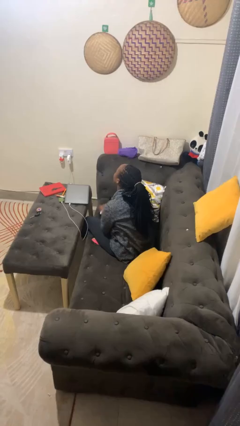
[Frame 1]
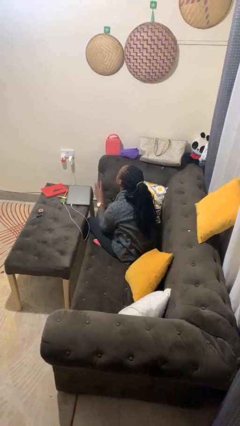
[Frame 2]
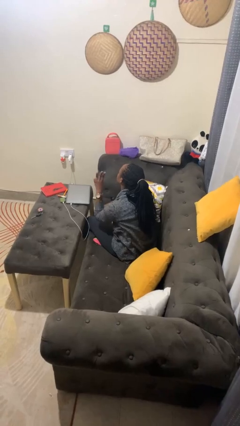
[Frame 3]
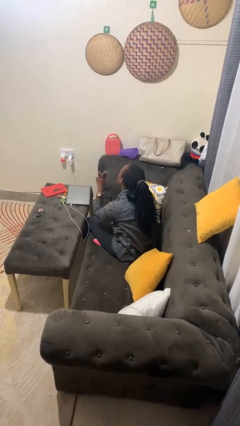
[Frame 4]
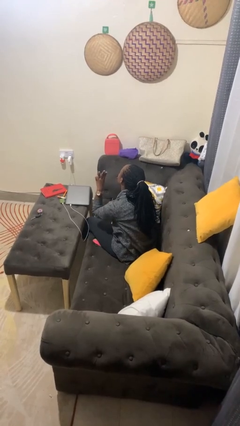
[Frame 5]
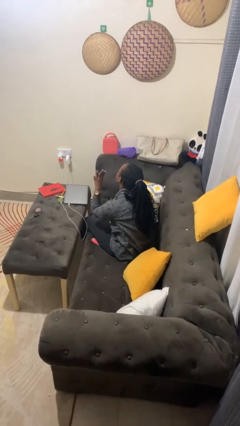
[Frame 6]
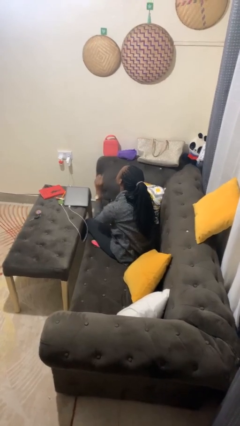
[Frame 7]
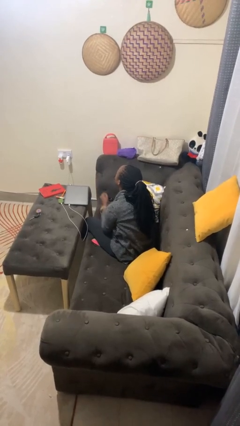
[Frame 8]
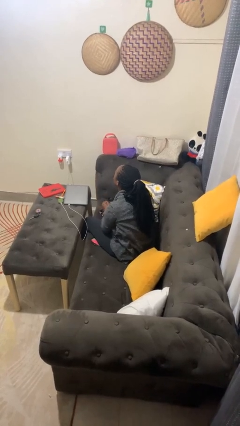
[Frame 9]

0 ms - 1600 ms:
person gestures number three

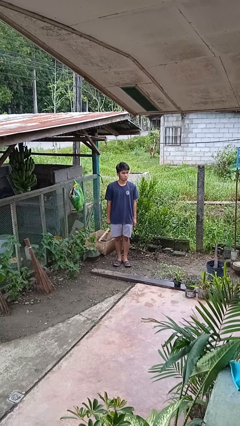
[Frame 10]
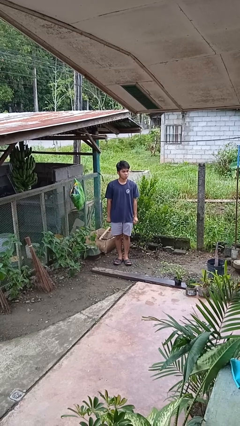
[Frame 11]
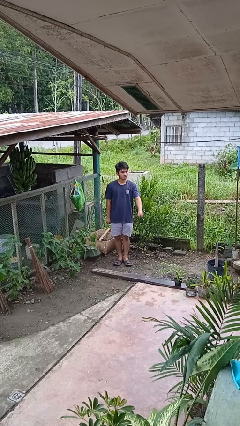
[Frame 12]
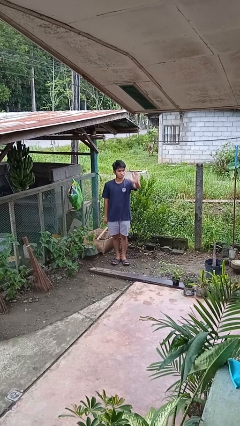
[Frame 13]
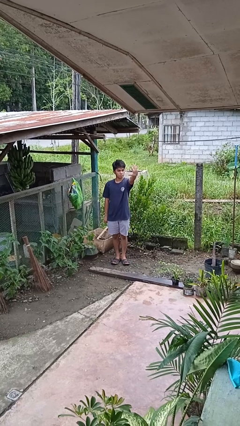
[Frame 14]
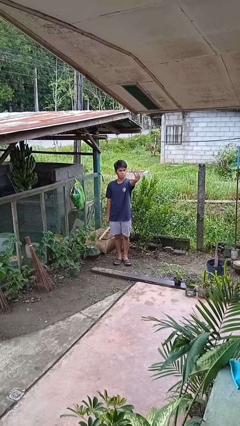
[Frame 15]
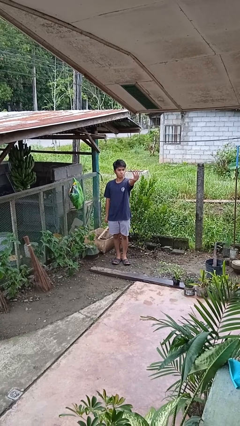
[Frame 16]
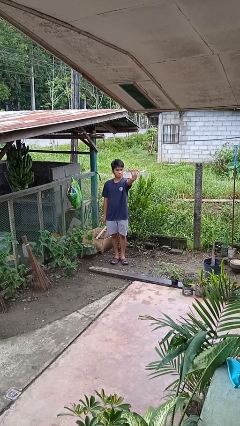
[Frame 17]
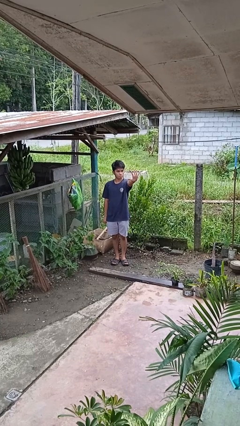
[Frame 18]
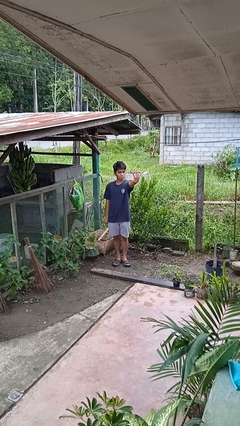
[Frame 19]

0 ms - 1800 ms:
person gestures number five

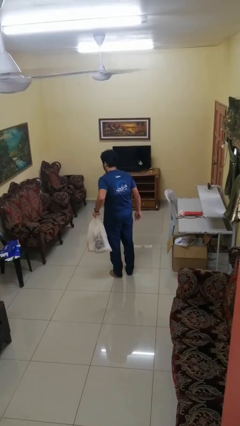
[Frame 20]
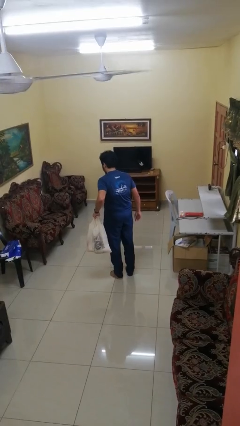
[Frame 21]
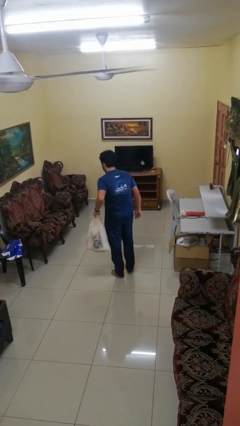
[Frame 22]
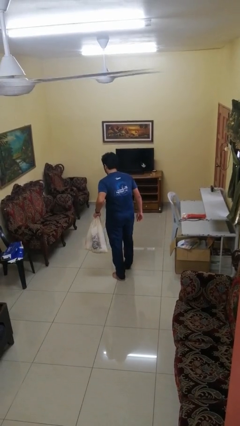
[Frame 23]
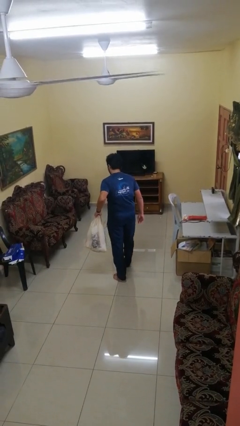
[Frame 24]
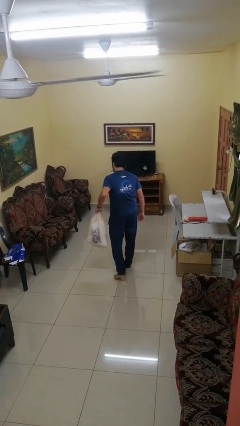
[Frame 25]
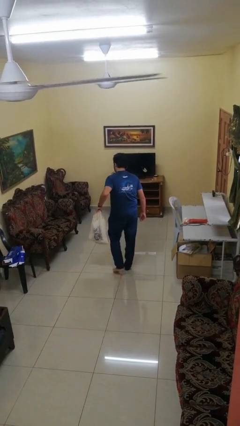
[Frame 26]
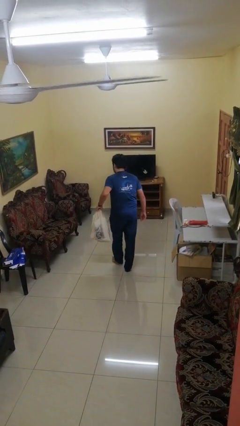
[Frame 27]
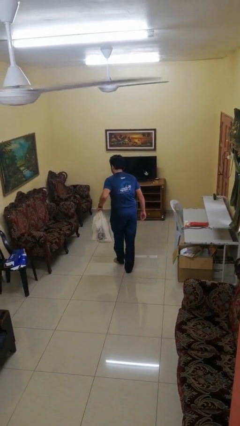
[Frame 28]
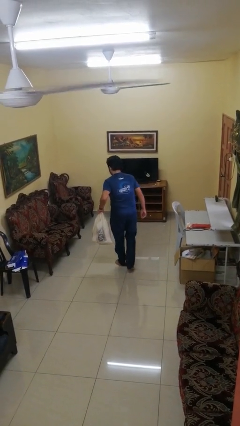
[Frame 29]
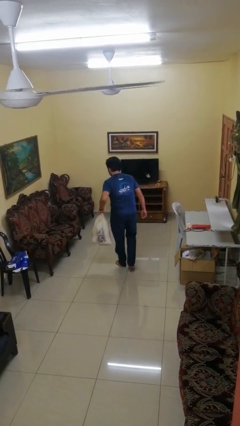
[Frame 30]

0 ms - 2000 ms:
person carries groceries

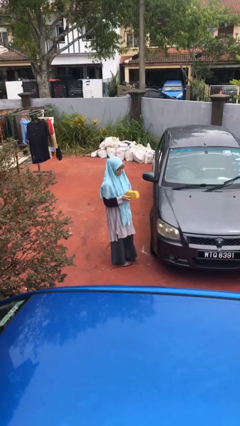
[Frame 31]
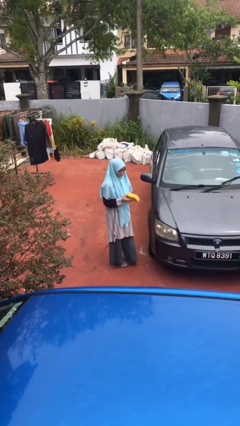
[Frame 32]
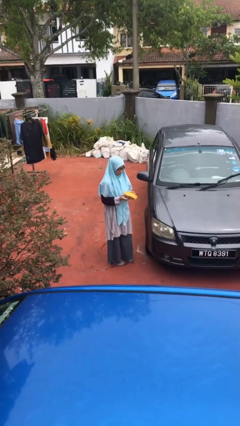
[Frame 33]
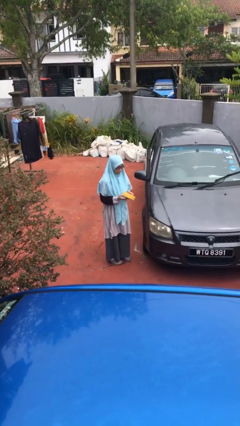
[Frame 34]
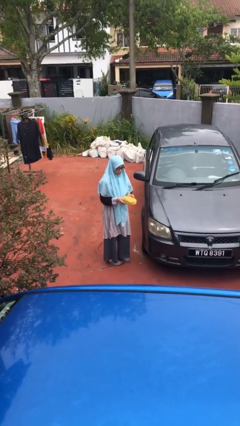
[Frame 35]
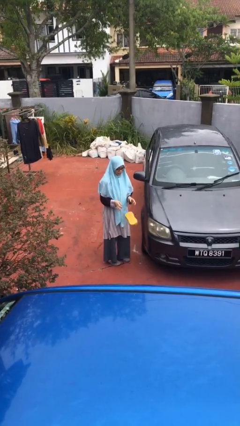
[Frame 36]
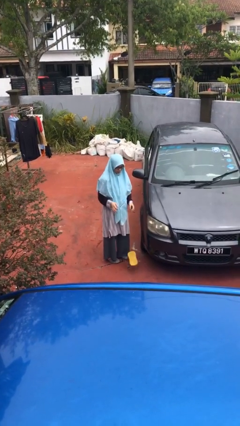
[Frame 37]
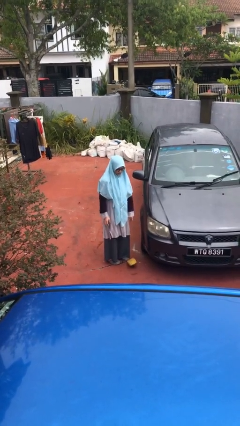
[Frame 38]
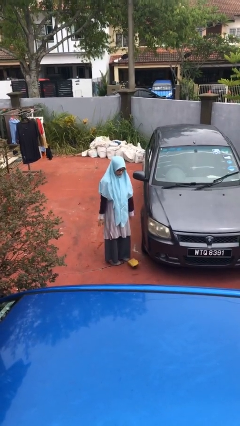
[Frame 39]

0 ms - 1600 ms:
person drops object

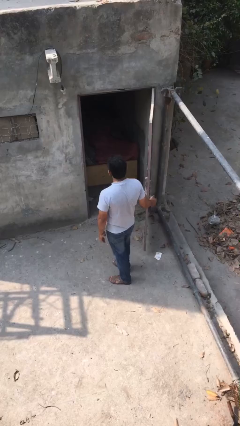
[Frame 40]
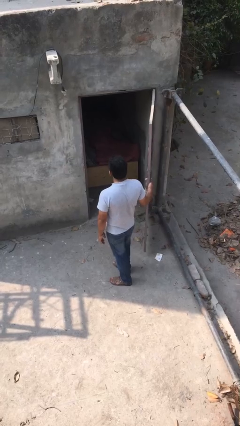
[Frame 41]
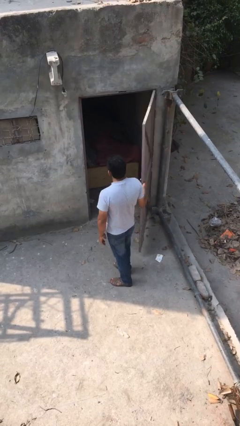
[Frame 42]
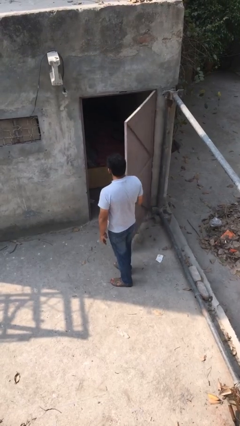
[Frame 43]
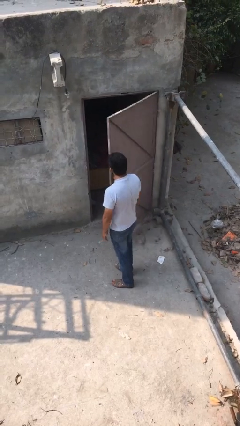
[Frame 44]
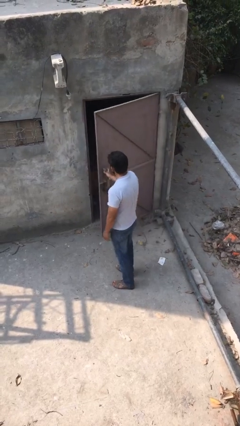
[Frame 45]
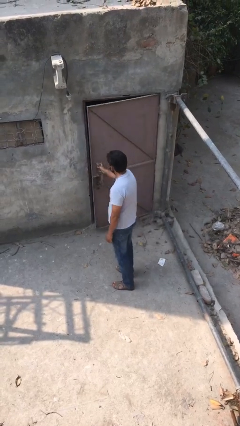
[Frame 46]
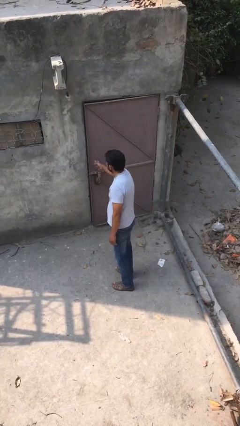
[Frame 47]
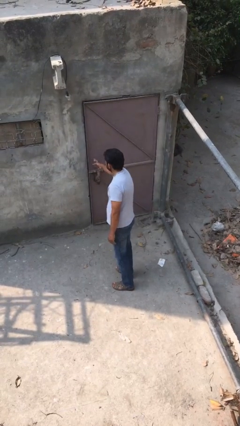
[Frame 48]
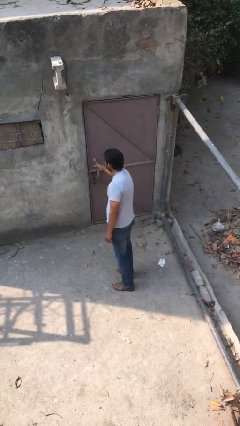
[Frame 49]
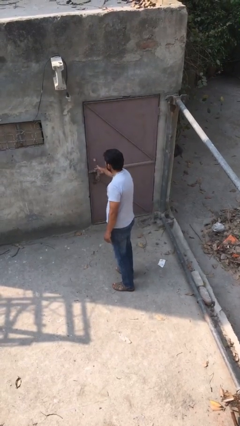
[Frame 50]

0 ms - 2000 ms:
person closes facility door

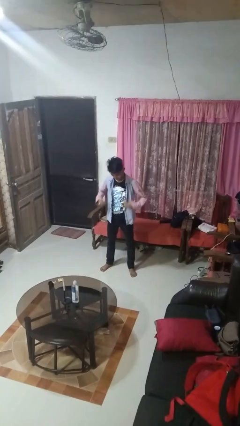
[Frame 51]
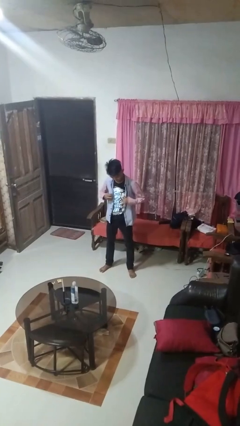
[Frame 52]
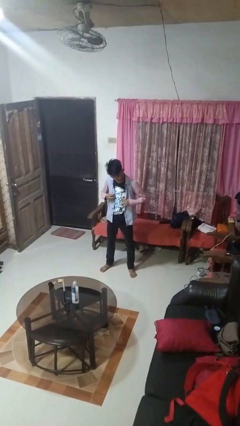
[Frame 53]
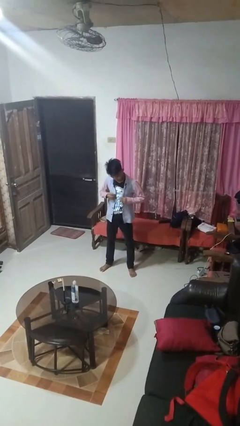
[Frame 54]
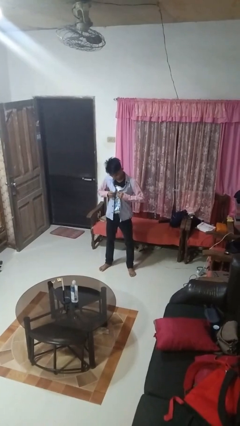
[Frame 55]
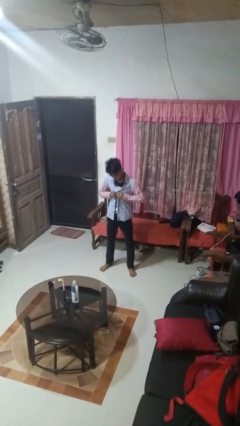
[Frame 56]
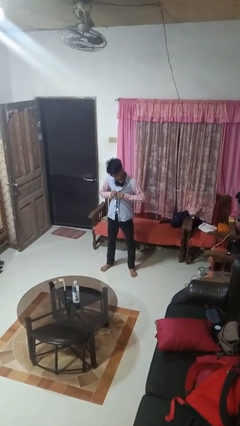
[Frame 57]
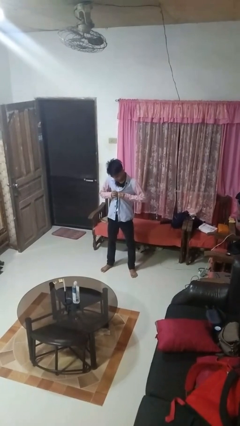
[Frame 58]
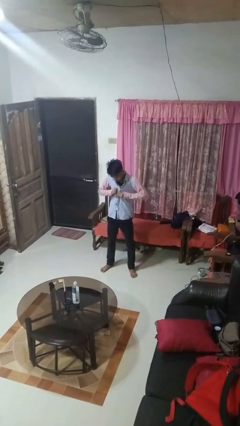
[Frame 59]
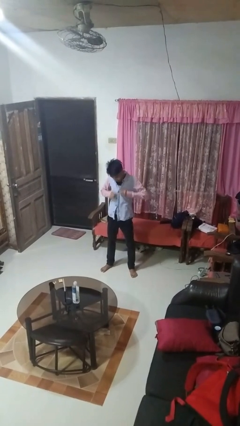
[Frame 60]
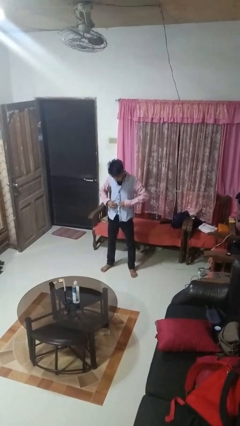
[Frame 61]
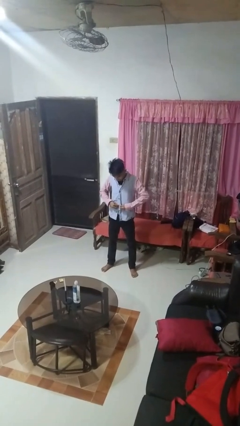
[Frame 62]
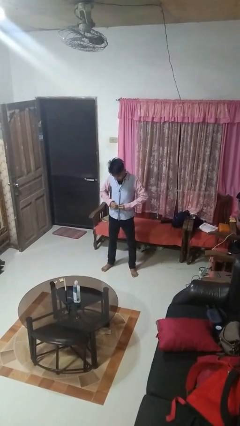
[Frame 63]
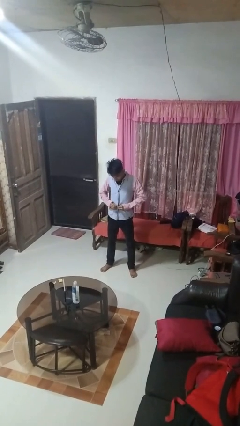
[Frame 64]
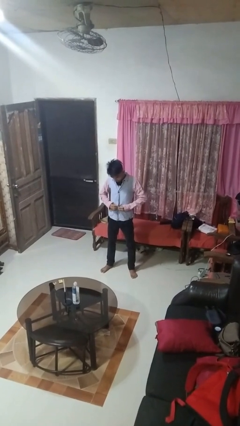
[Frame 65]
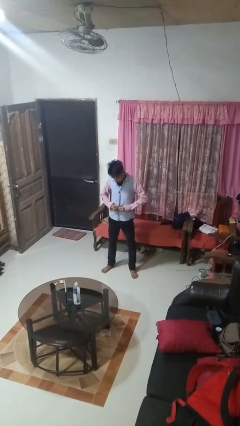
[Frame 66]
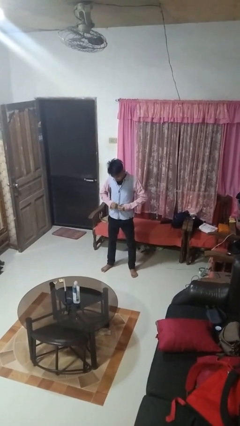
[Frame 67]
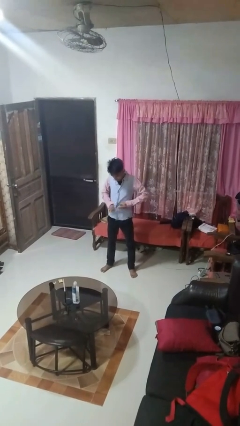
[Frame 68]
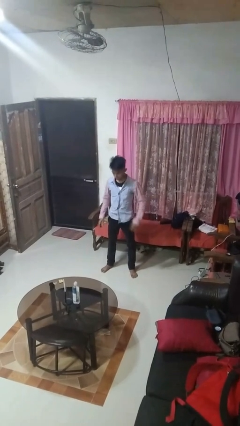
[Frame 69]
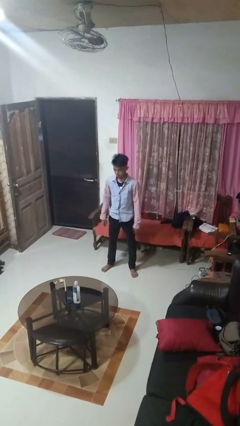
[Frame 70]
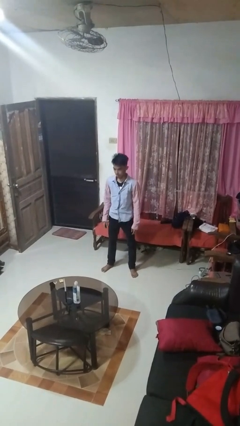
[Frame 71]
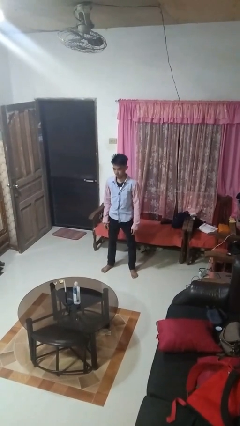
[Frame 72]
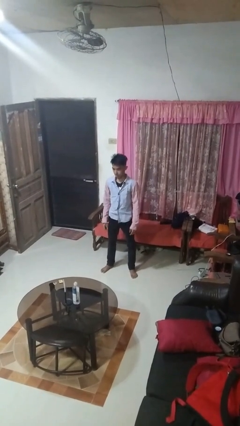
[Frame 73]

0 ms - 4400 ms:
person buttons shirt

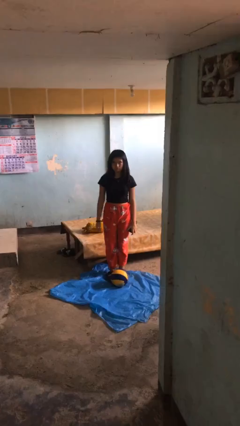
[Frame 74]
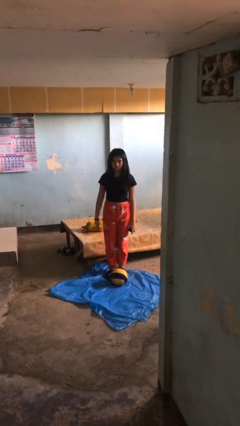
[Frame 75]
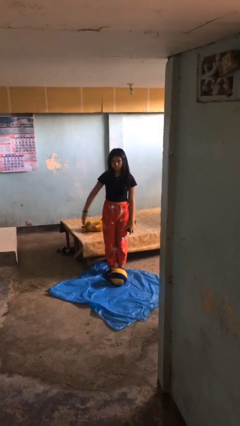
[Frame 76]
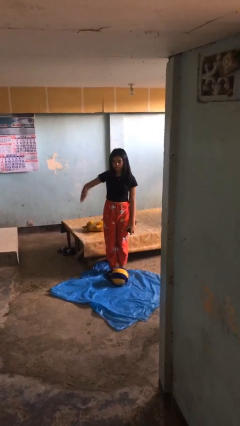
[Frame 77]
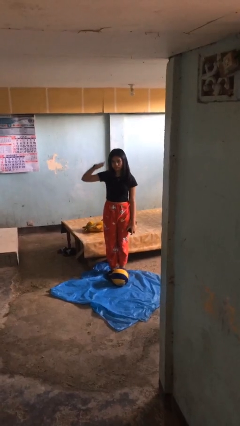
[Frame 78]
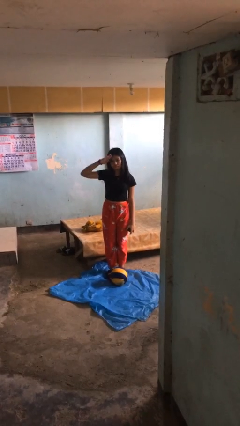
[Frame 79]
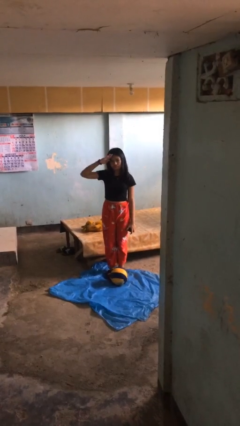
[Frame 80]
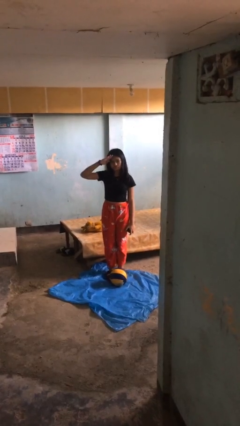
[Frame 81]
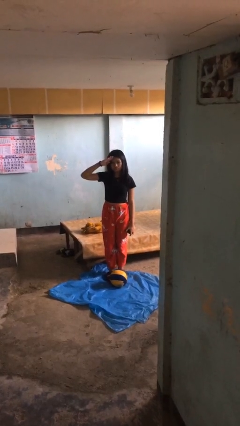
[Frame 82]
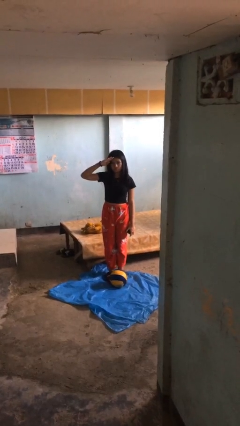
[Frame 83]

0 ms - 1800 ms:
person salutes

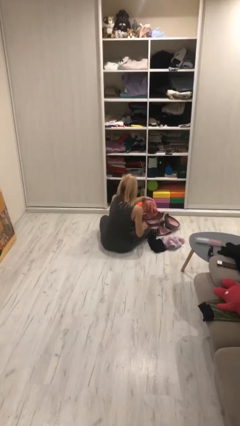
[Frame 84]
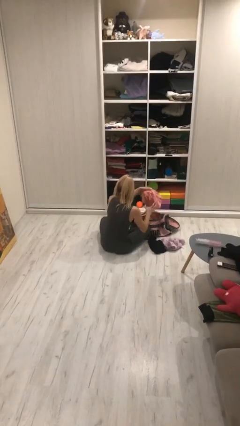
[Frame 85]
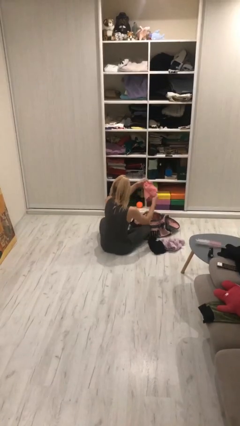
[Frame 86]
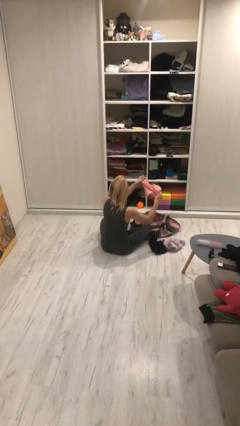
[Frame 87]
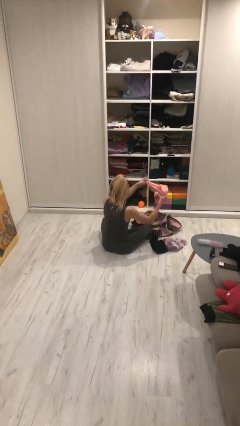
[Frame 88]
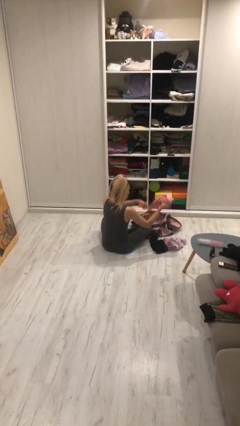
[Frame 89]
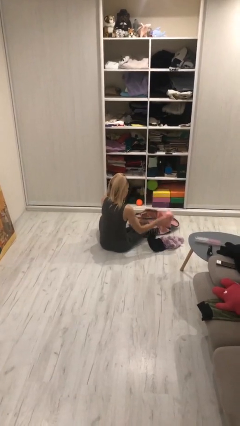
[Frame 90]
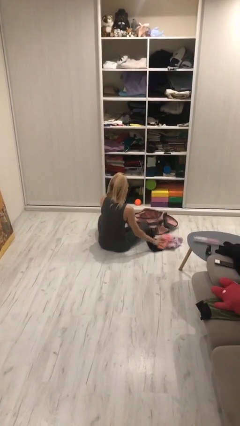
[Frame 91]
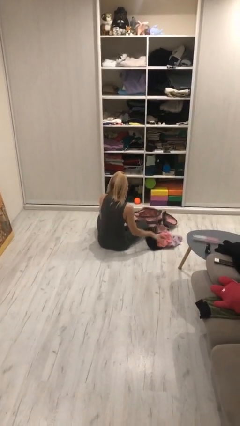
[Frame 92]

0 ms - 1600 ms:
person unloads clothes from suitcase
